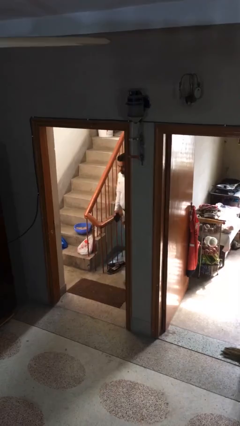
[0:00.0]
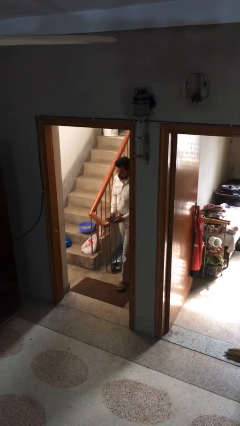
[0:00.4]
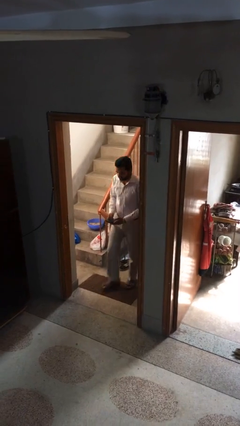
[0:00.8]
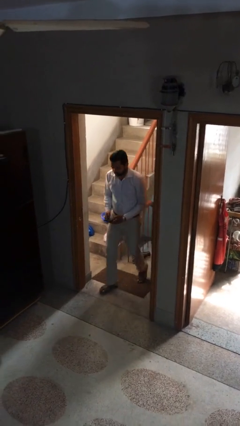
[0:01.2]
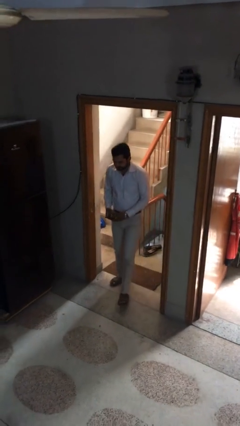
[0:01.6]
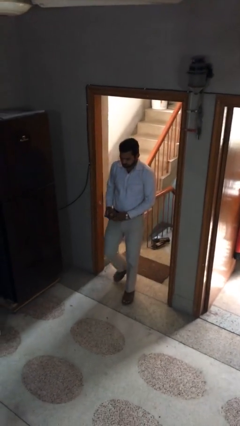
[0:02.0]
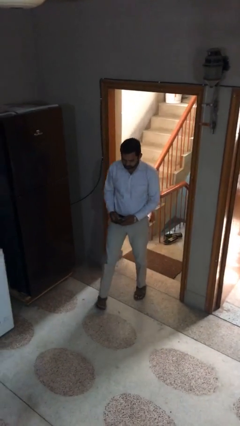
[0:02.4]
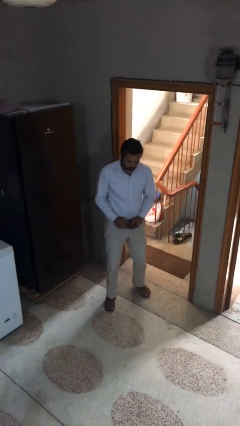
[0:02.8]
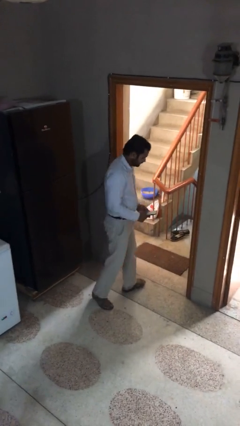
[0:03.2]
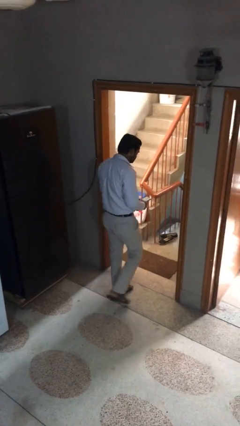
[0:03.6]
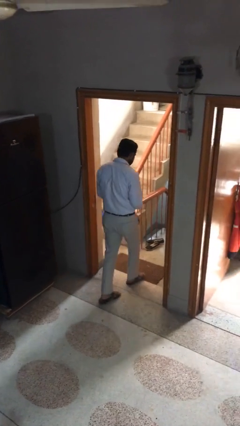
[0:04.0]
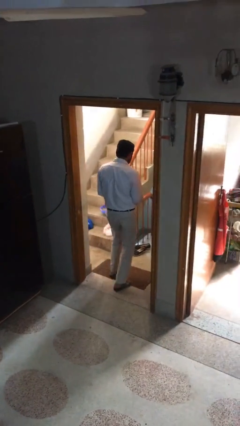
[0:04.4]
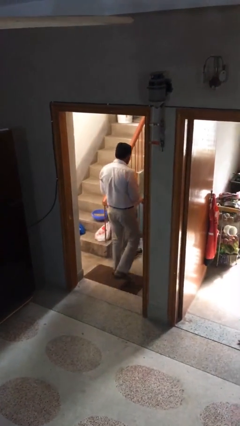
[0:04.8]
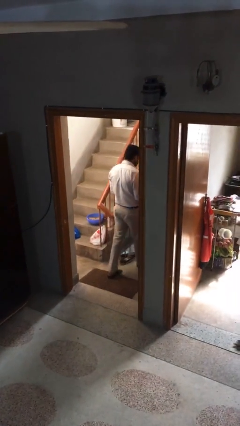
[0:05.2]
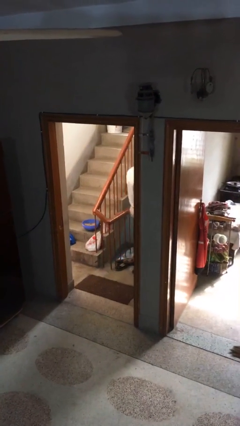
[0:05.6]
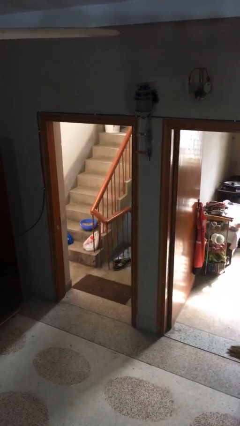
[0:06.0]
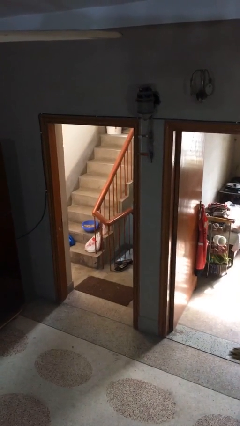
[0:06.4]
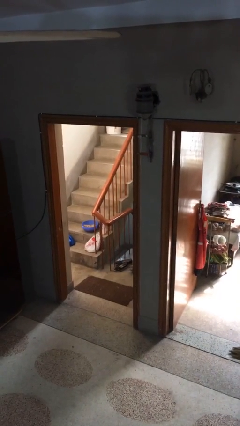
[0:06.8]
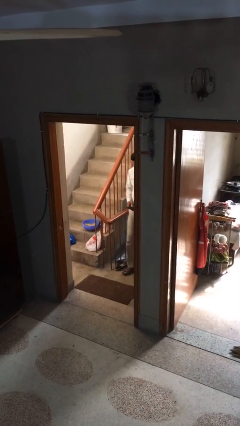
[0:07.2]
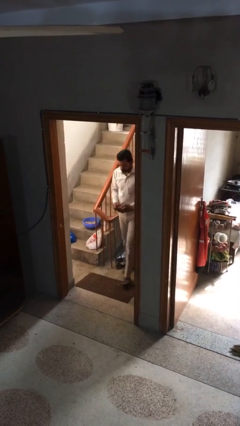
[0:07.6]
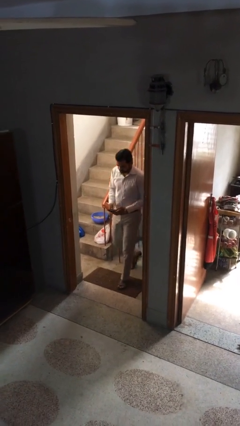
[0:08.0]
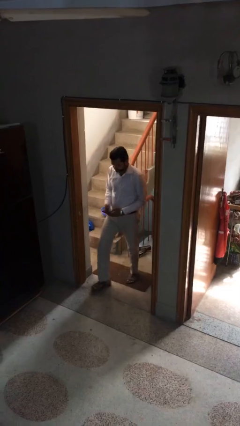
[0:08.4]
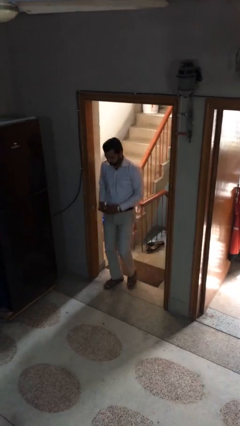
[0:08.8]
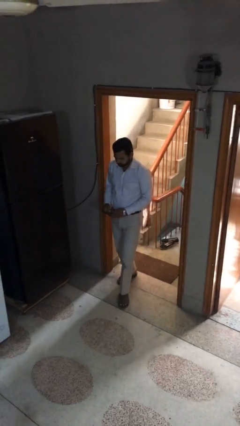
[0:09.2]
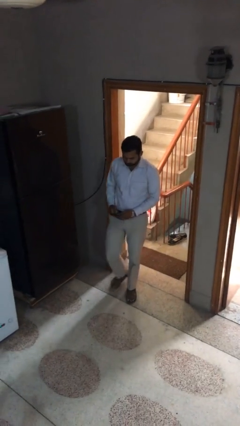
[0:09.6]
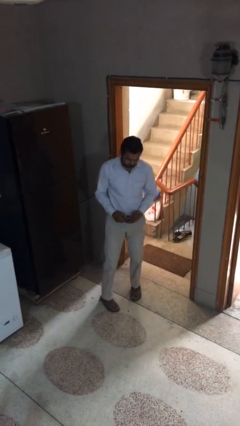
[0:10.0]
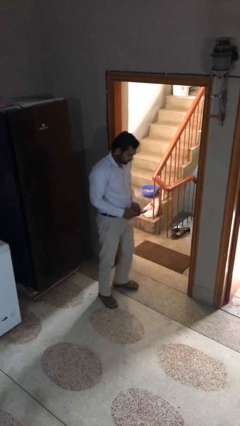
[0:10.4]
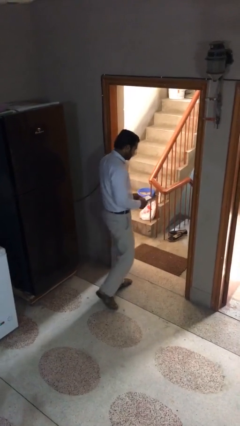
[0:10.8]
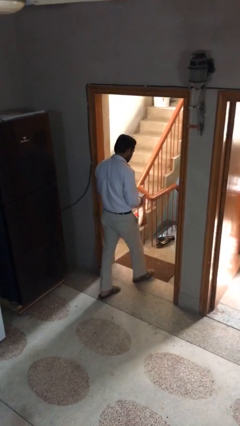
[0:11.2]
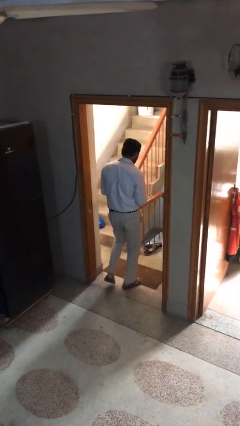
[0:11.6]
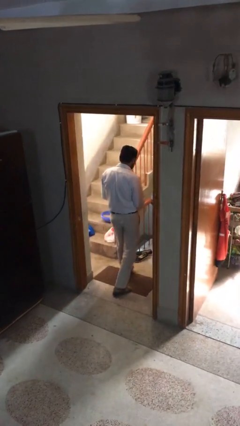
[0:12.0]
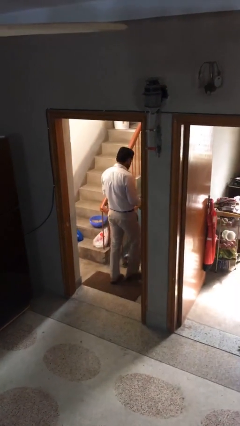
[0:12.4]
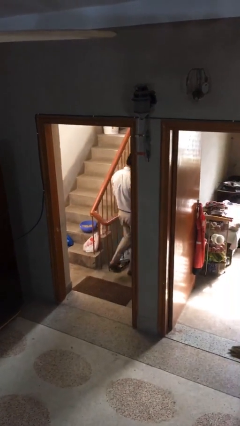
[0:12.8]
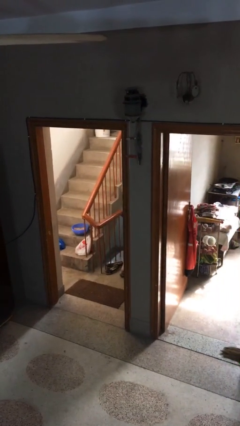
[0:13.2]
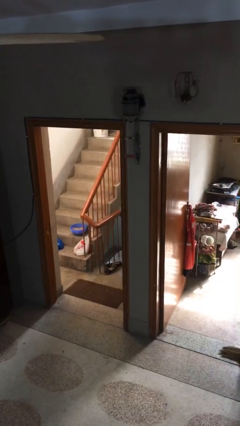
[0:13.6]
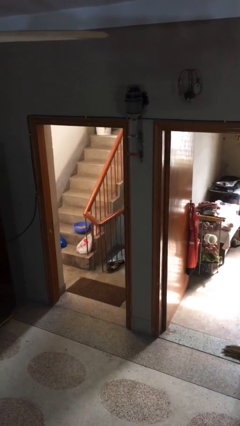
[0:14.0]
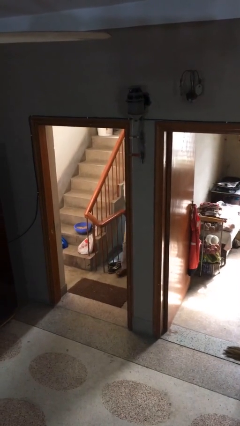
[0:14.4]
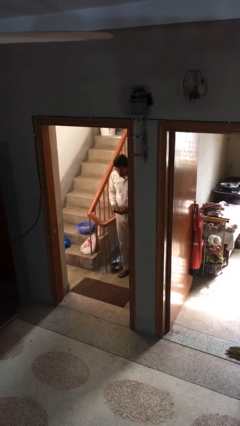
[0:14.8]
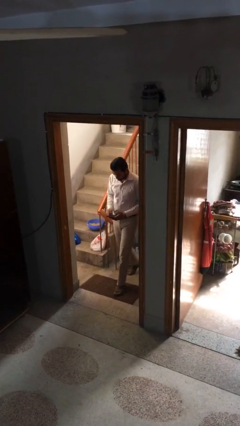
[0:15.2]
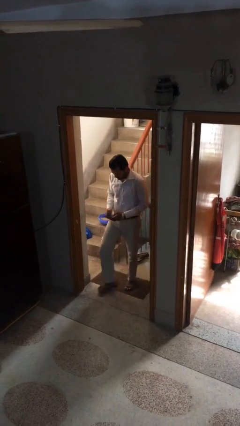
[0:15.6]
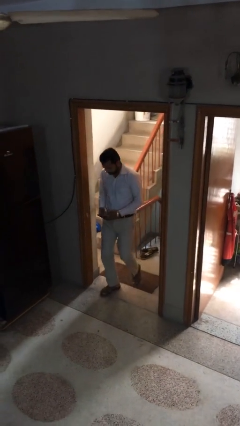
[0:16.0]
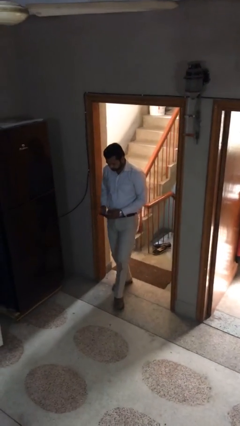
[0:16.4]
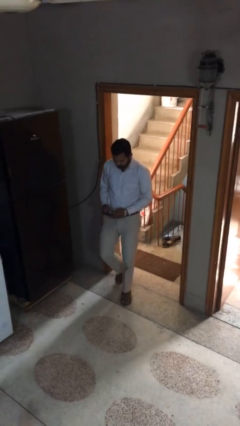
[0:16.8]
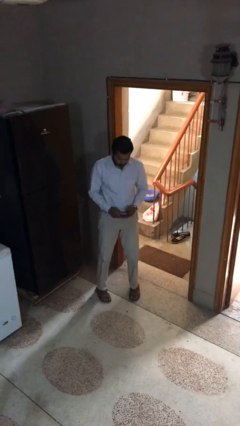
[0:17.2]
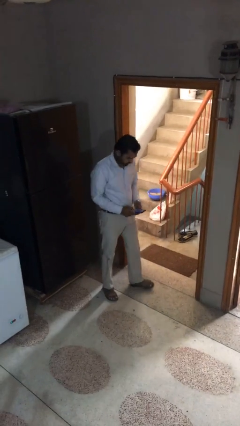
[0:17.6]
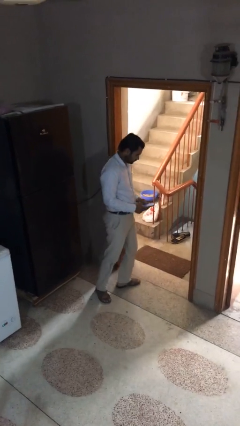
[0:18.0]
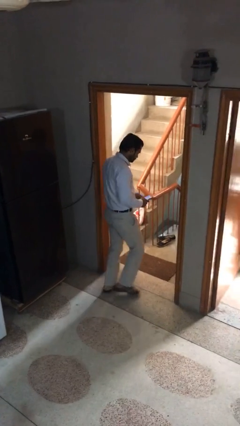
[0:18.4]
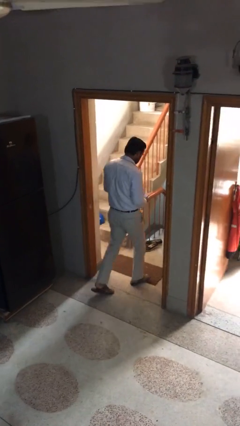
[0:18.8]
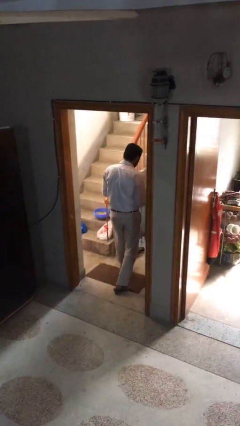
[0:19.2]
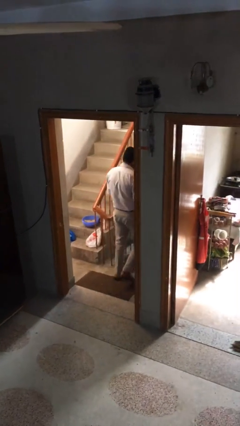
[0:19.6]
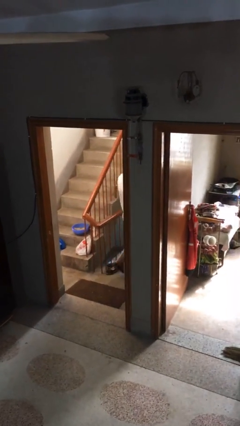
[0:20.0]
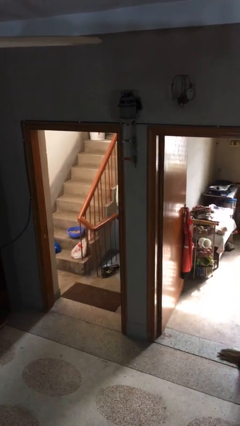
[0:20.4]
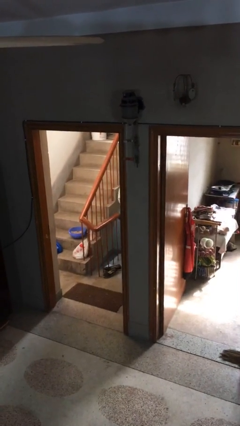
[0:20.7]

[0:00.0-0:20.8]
person texts on phone

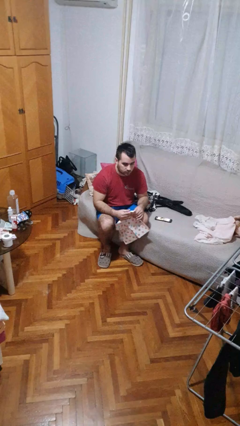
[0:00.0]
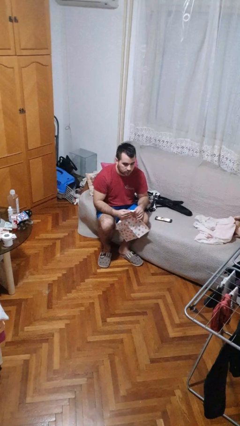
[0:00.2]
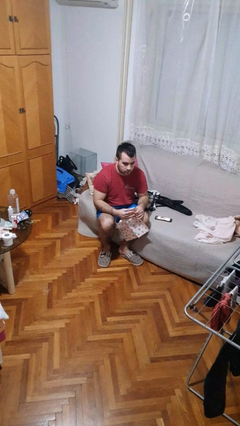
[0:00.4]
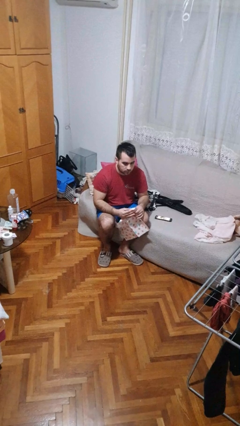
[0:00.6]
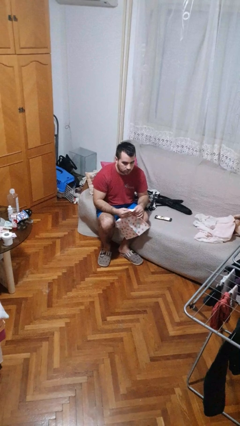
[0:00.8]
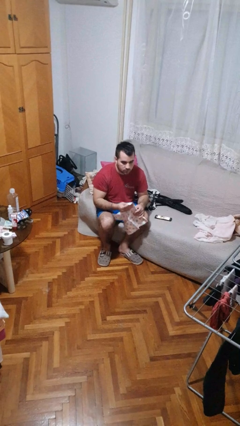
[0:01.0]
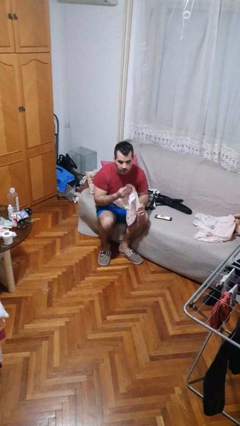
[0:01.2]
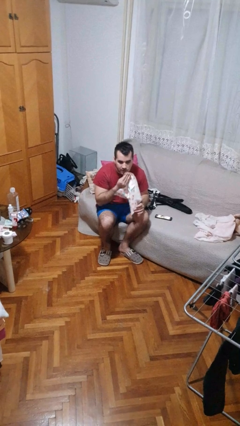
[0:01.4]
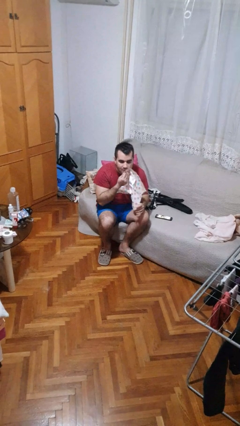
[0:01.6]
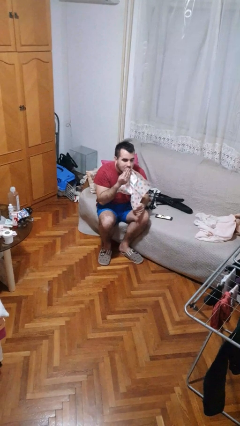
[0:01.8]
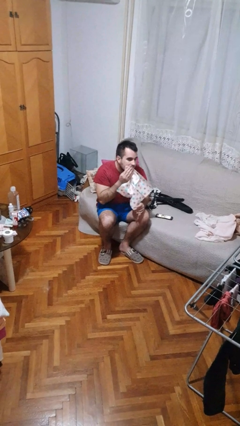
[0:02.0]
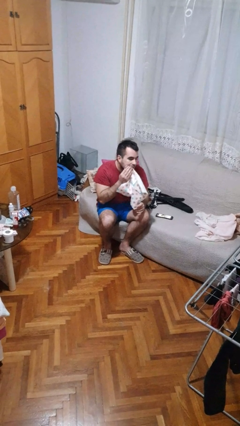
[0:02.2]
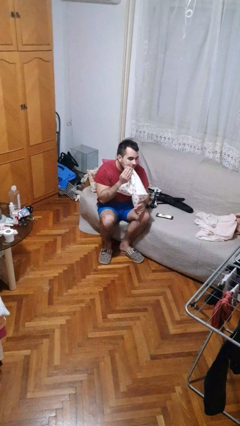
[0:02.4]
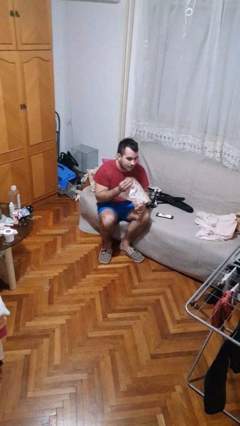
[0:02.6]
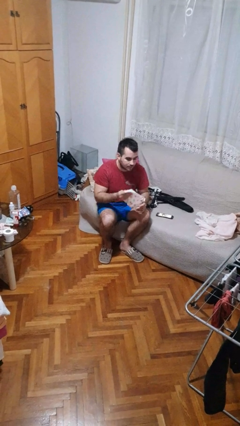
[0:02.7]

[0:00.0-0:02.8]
person wipes mouth with napkin

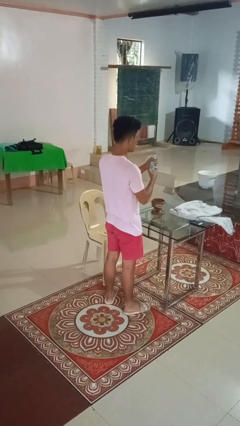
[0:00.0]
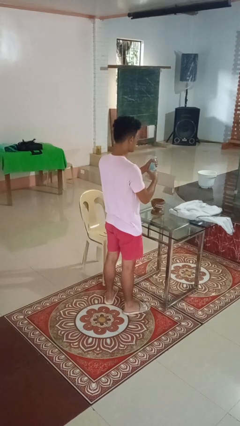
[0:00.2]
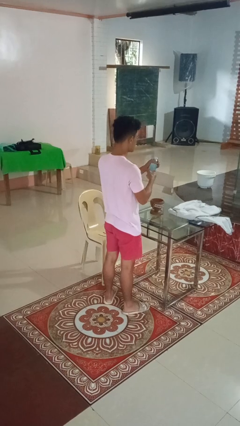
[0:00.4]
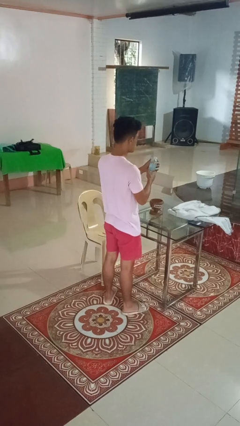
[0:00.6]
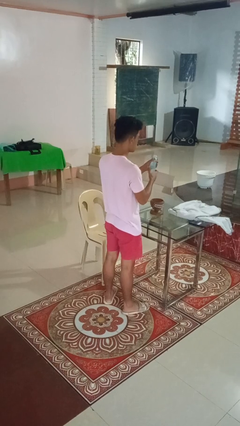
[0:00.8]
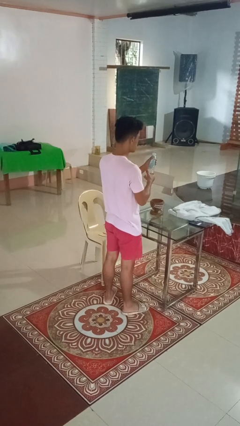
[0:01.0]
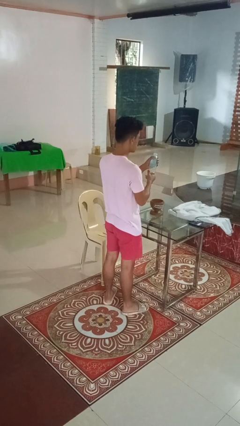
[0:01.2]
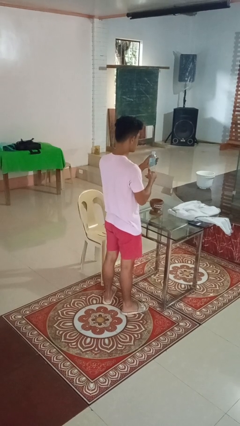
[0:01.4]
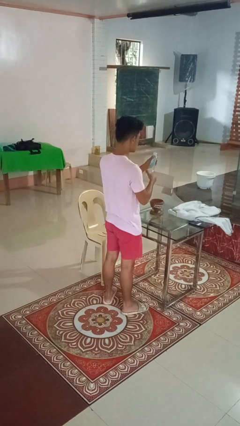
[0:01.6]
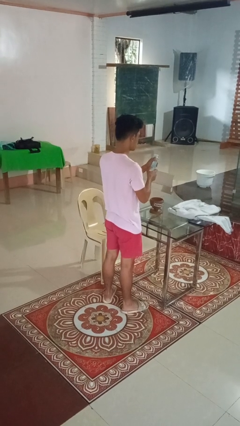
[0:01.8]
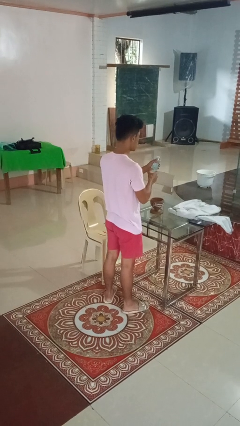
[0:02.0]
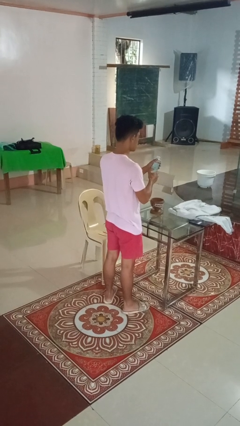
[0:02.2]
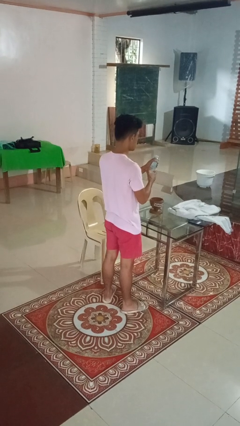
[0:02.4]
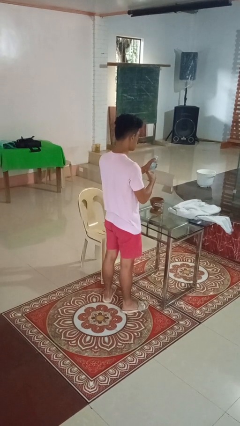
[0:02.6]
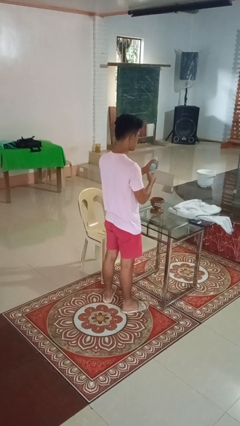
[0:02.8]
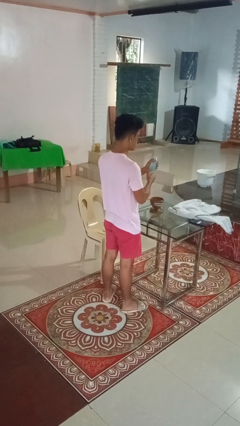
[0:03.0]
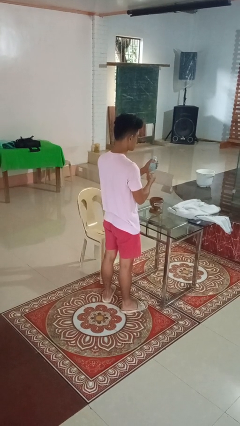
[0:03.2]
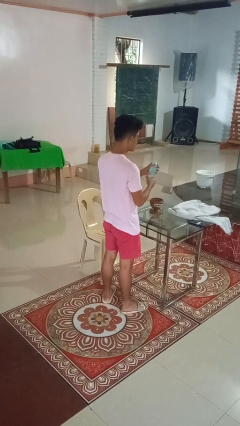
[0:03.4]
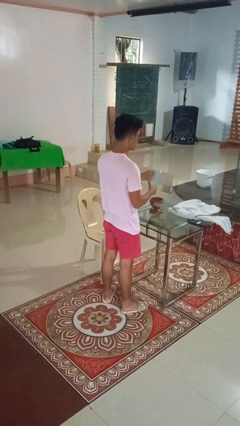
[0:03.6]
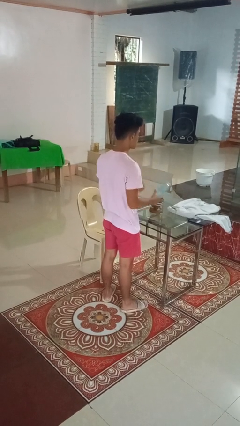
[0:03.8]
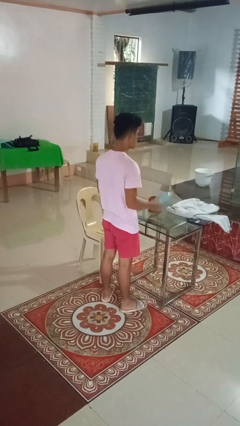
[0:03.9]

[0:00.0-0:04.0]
person squeezes object

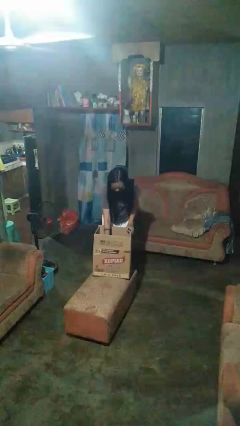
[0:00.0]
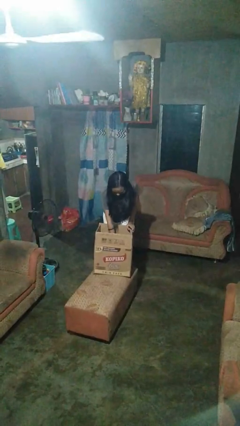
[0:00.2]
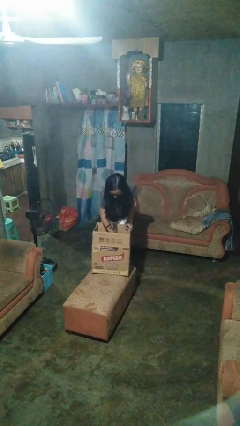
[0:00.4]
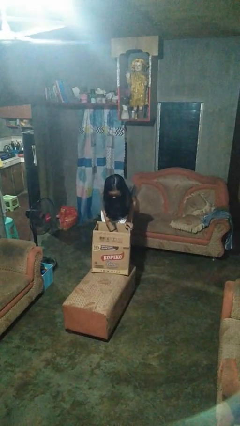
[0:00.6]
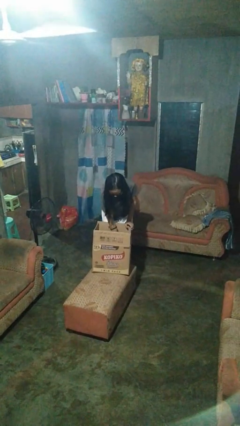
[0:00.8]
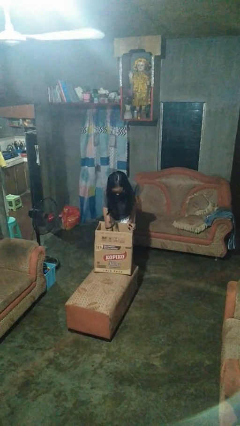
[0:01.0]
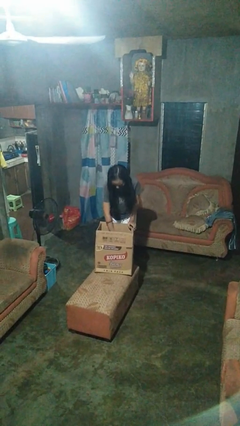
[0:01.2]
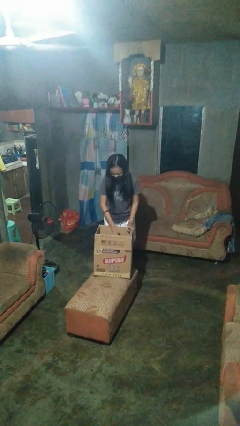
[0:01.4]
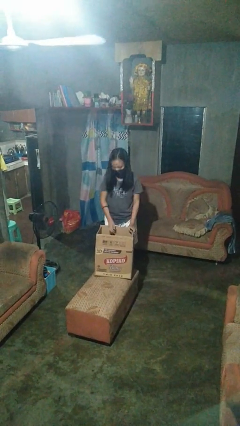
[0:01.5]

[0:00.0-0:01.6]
person searches in box
